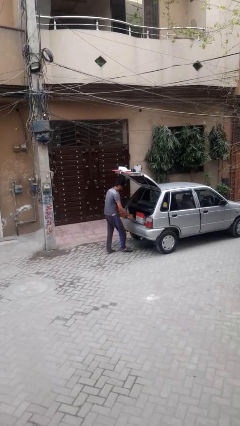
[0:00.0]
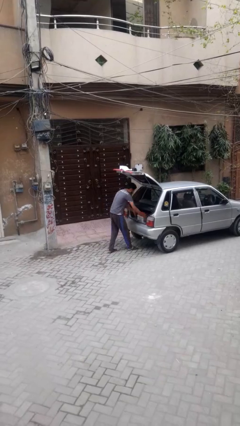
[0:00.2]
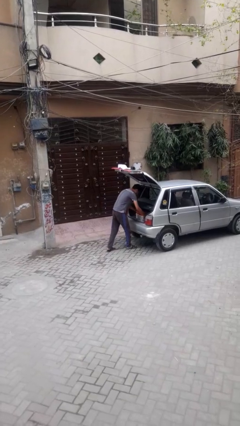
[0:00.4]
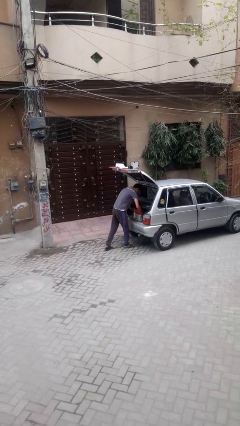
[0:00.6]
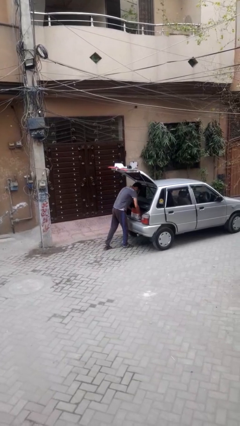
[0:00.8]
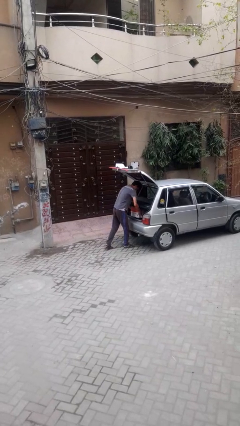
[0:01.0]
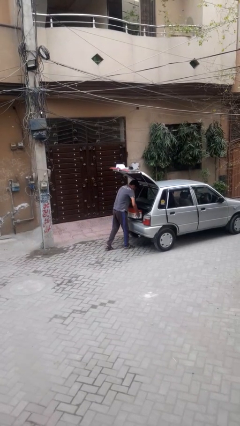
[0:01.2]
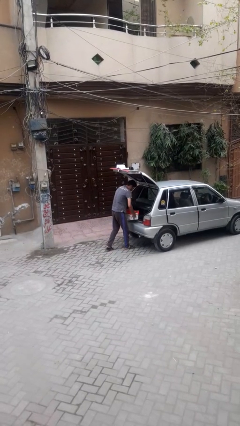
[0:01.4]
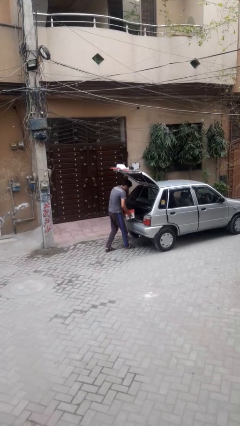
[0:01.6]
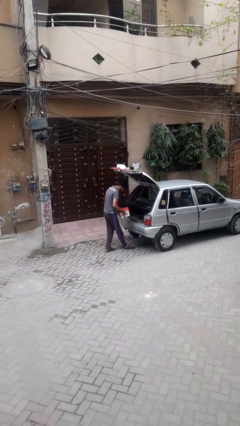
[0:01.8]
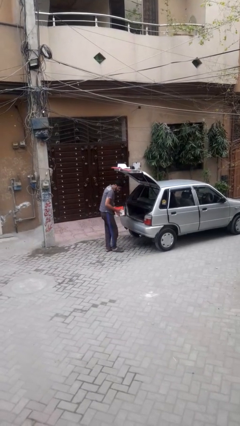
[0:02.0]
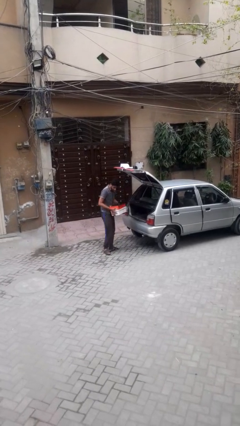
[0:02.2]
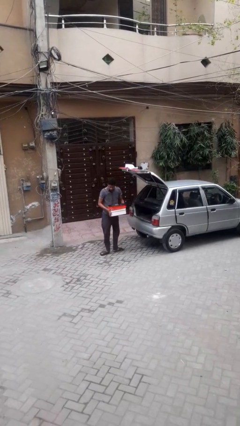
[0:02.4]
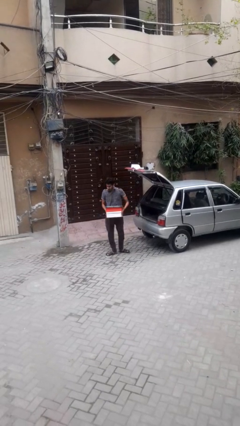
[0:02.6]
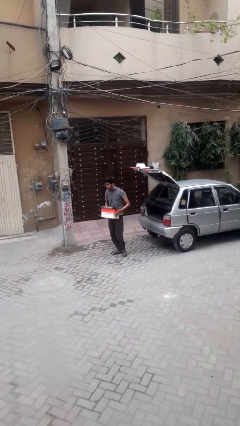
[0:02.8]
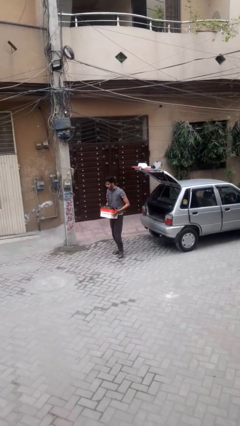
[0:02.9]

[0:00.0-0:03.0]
person unloads car

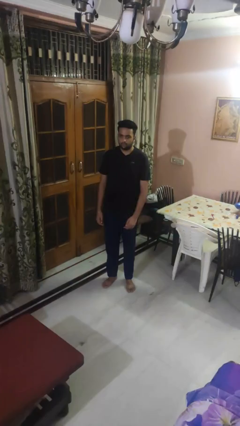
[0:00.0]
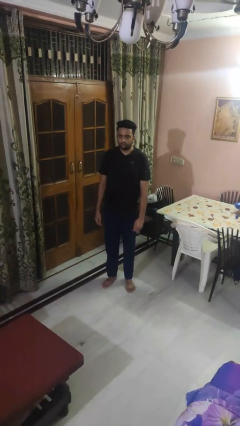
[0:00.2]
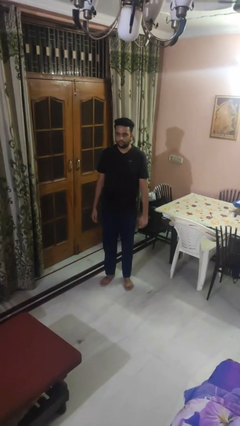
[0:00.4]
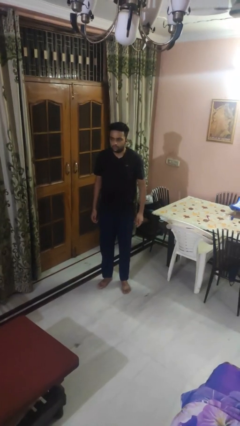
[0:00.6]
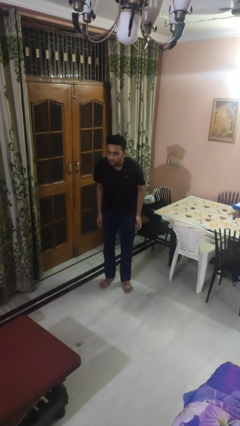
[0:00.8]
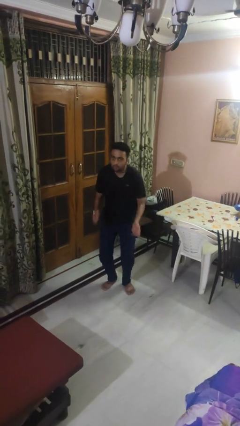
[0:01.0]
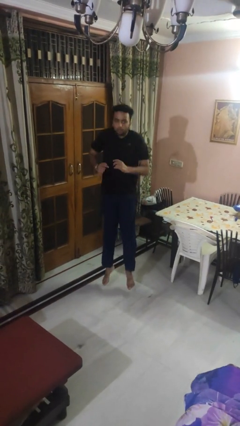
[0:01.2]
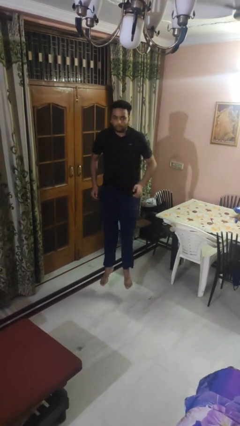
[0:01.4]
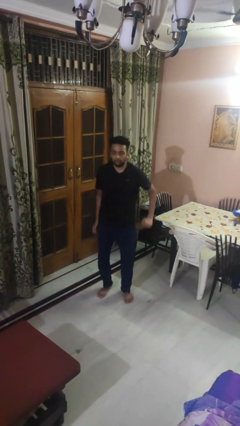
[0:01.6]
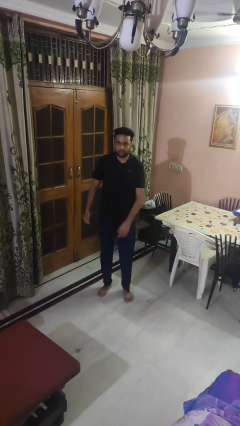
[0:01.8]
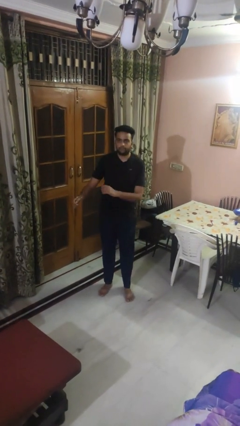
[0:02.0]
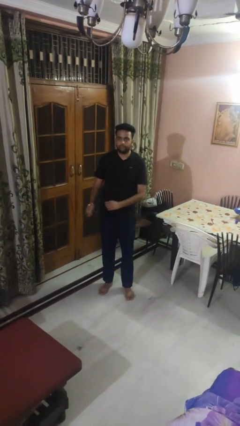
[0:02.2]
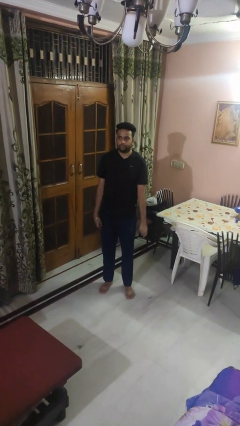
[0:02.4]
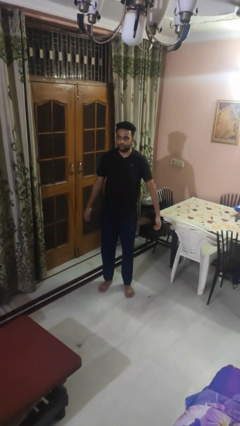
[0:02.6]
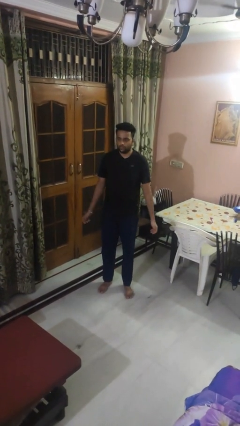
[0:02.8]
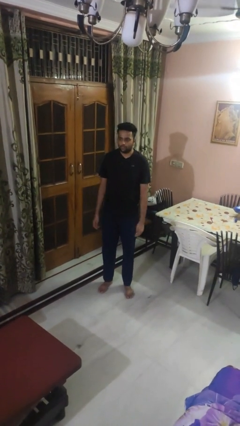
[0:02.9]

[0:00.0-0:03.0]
person jumps

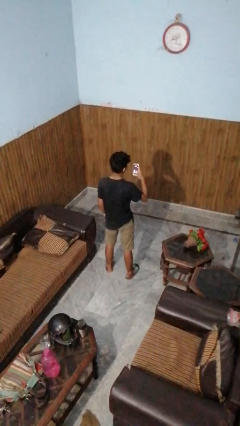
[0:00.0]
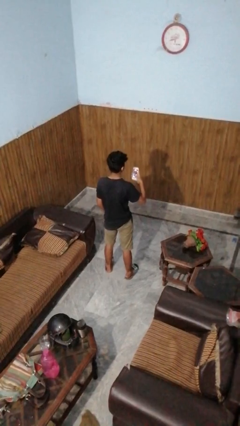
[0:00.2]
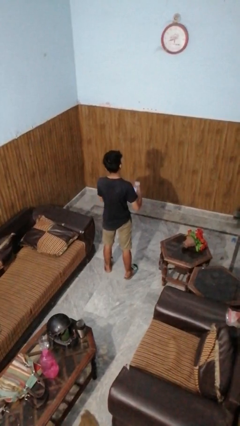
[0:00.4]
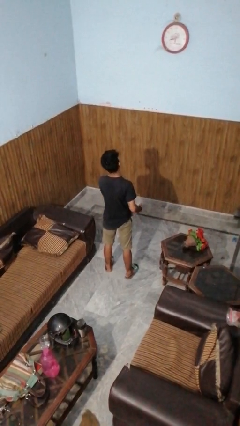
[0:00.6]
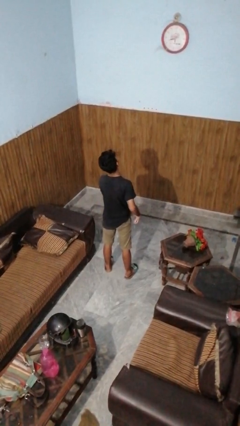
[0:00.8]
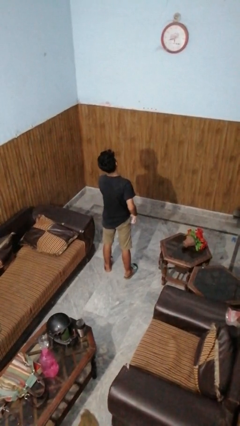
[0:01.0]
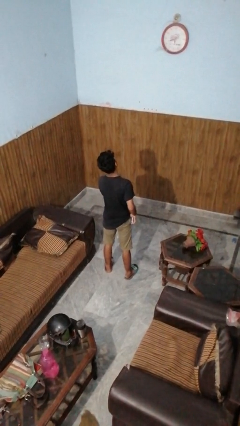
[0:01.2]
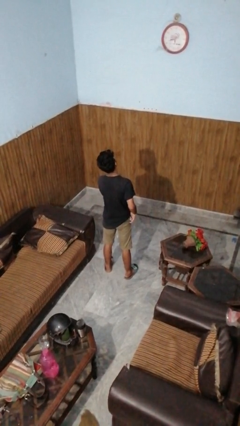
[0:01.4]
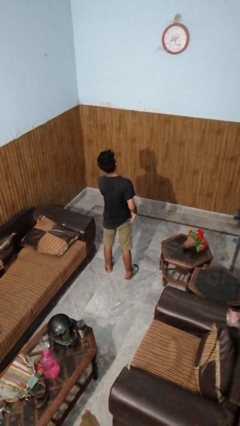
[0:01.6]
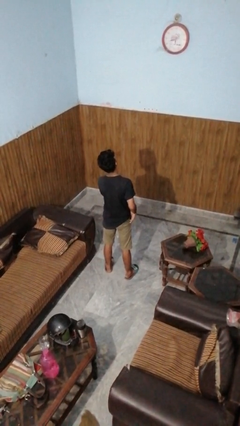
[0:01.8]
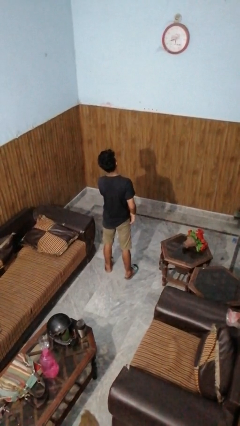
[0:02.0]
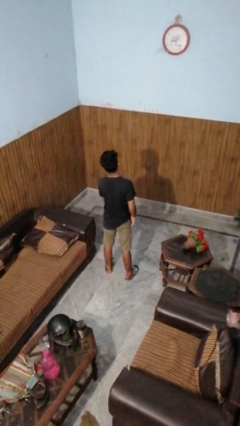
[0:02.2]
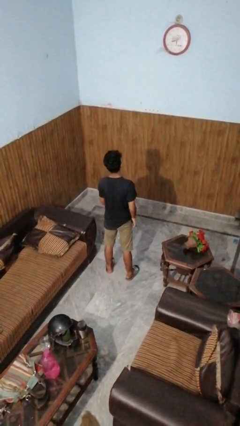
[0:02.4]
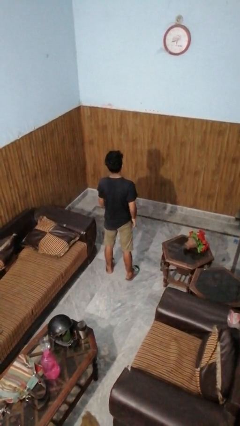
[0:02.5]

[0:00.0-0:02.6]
person puts phone into pocket

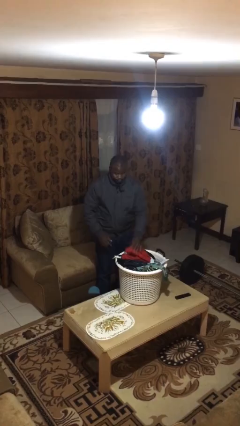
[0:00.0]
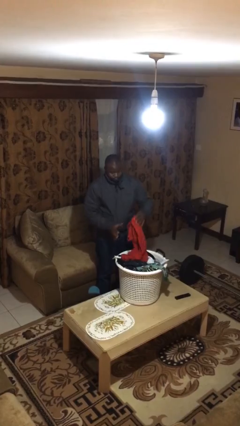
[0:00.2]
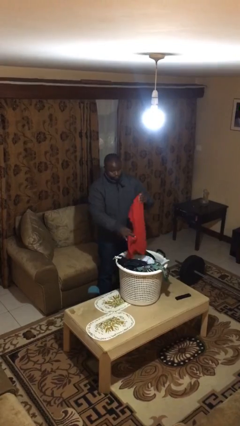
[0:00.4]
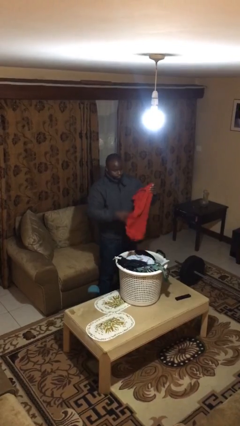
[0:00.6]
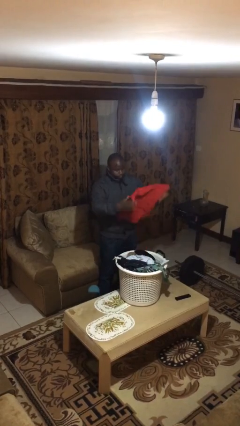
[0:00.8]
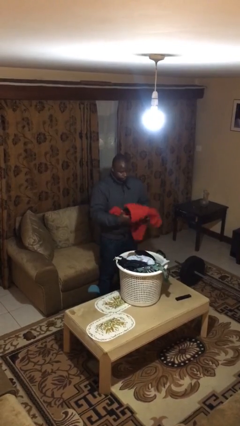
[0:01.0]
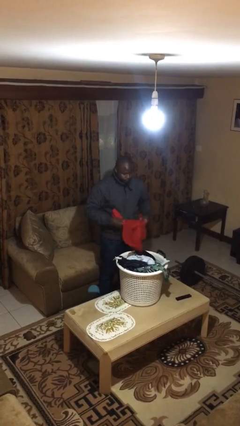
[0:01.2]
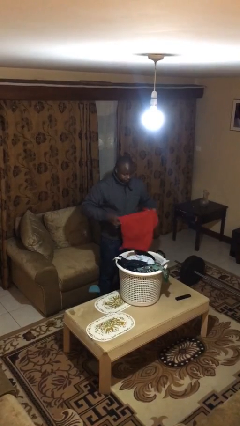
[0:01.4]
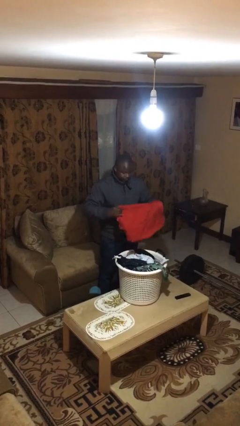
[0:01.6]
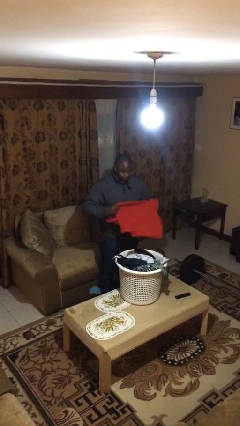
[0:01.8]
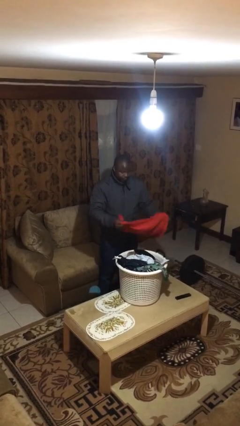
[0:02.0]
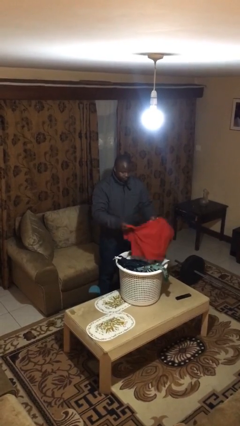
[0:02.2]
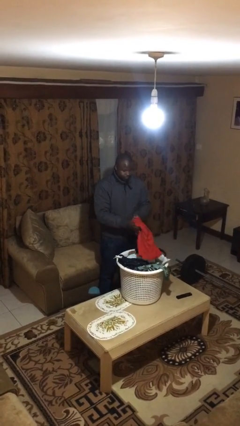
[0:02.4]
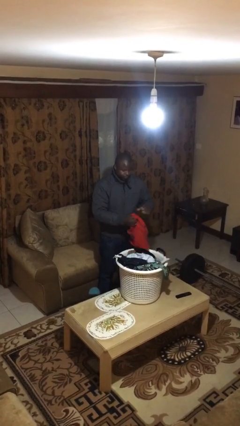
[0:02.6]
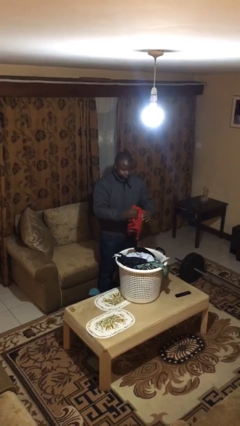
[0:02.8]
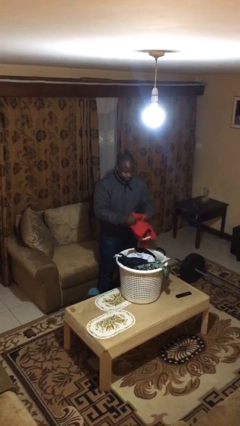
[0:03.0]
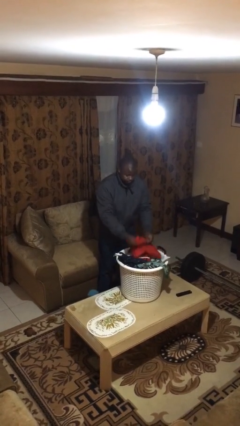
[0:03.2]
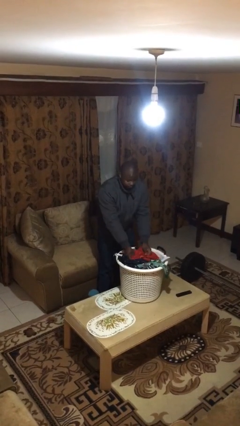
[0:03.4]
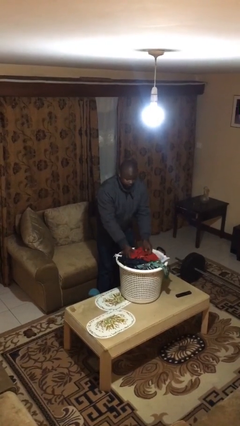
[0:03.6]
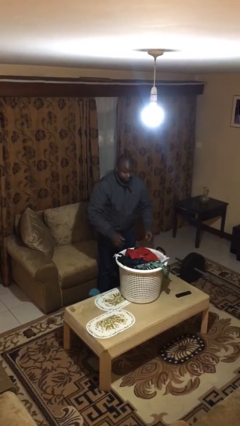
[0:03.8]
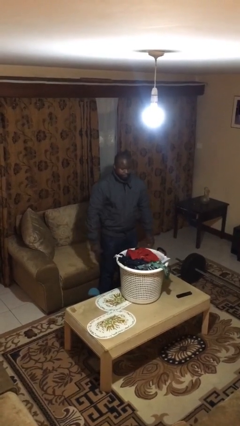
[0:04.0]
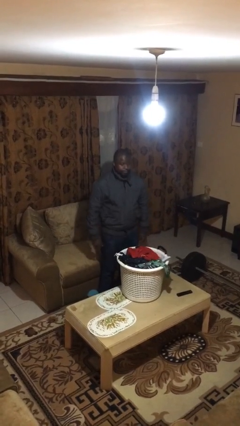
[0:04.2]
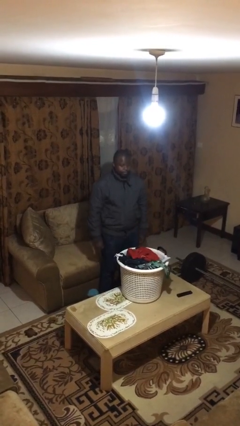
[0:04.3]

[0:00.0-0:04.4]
person folds shirt

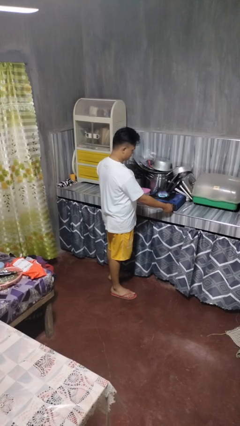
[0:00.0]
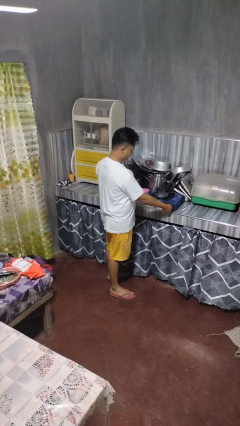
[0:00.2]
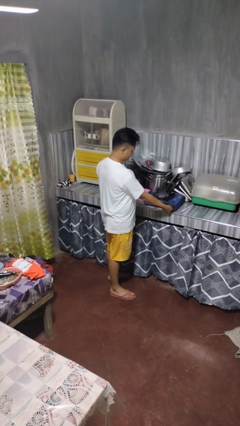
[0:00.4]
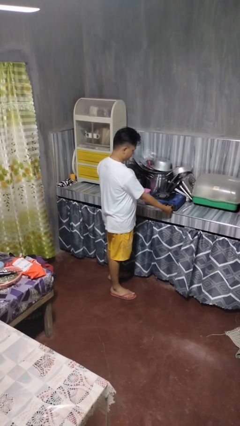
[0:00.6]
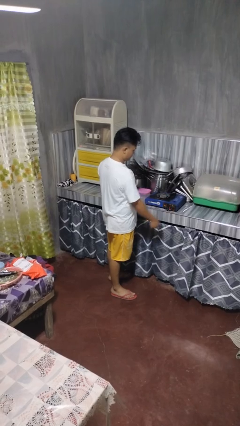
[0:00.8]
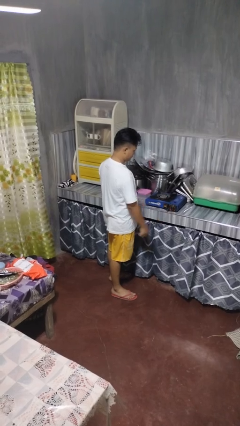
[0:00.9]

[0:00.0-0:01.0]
person turns off stovetop

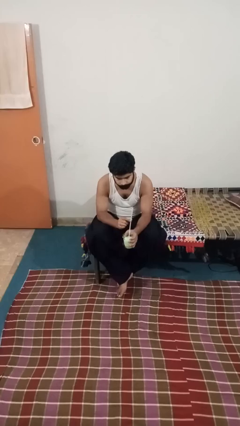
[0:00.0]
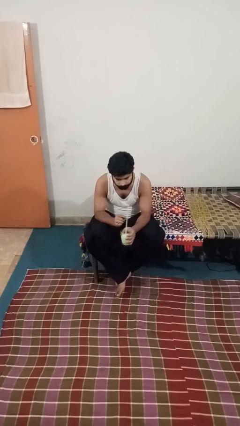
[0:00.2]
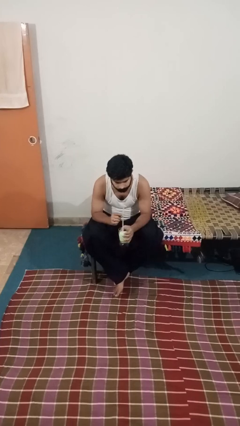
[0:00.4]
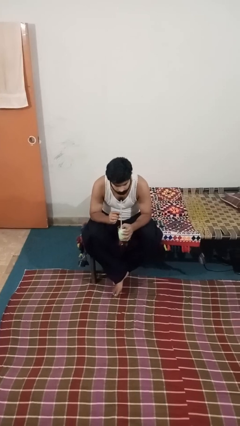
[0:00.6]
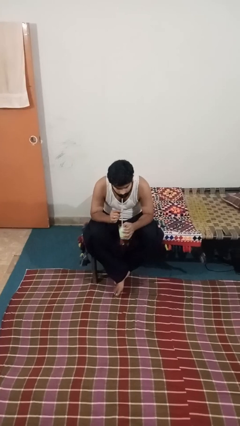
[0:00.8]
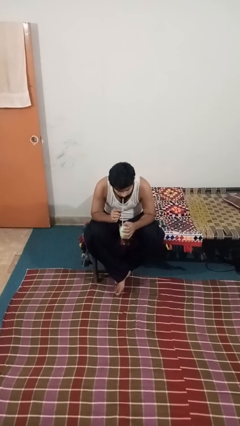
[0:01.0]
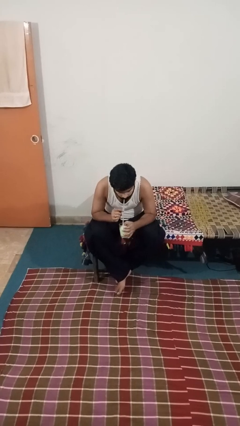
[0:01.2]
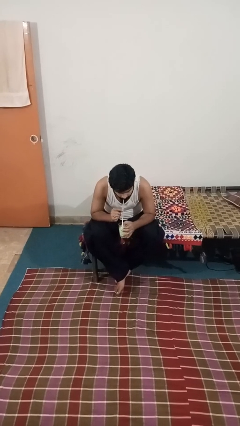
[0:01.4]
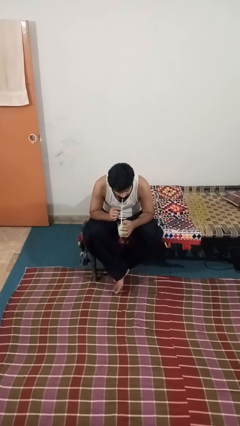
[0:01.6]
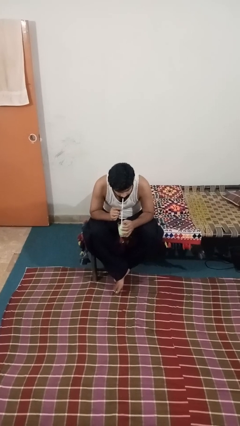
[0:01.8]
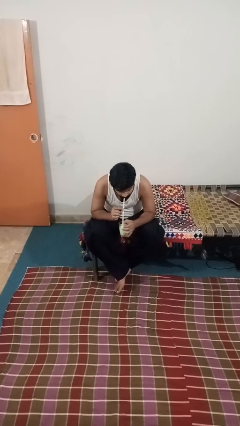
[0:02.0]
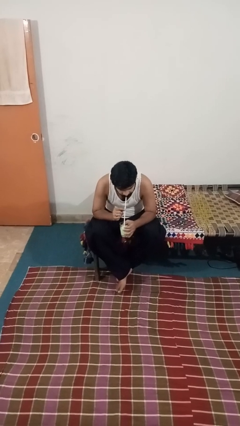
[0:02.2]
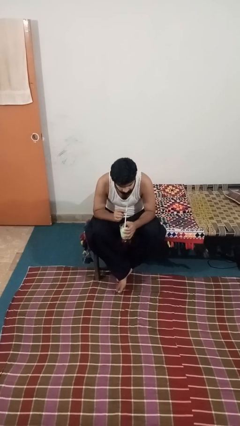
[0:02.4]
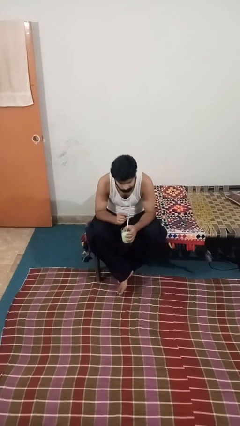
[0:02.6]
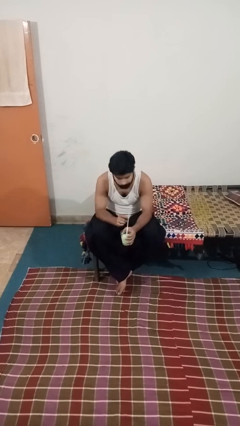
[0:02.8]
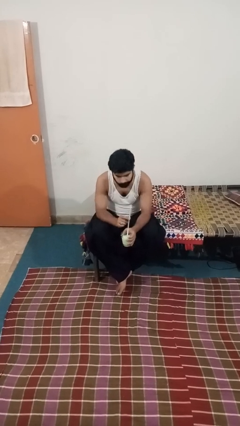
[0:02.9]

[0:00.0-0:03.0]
person drinks from straw

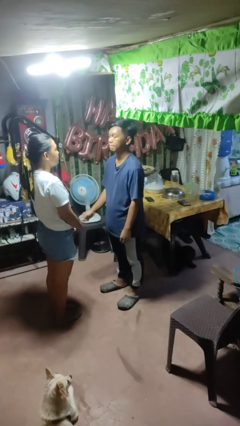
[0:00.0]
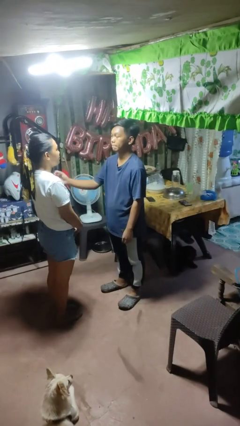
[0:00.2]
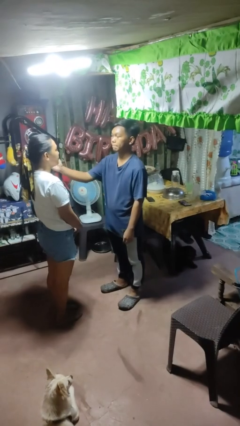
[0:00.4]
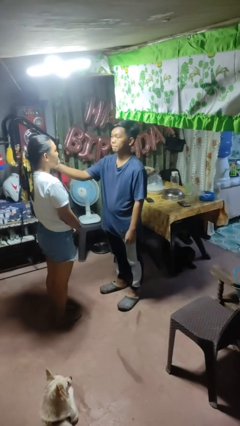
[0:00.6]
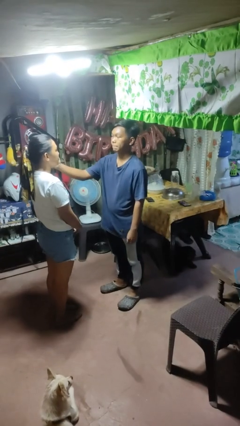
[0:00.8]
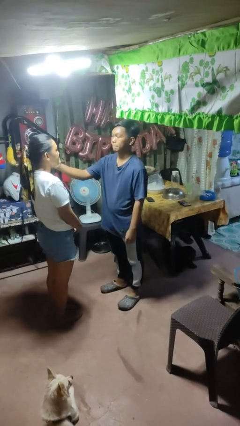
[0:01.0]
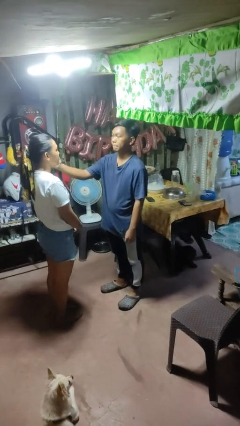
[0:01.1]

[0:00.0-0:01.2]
person touches face of person
